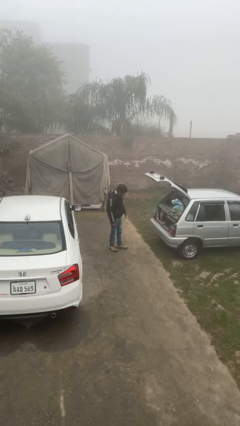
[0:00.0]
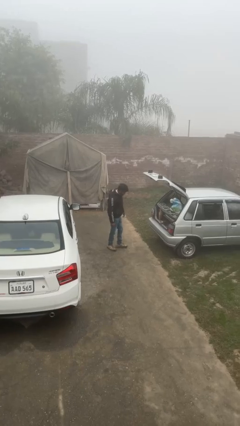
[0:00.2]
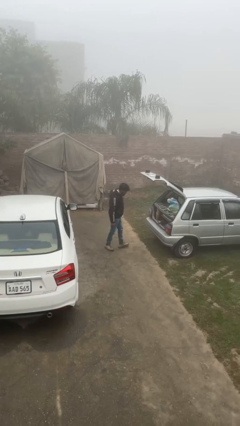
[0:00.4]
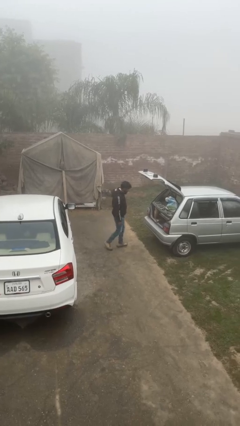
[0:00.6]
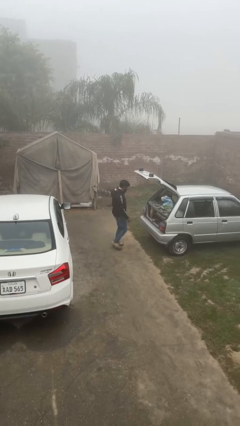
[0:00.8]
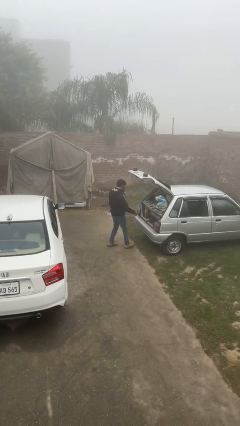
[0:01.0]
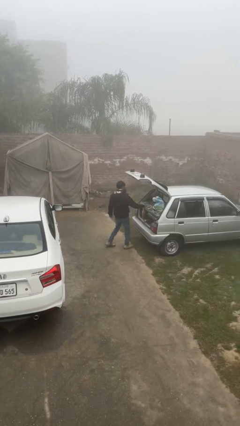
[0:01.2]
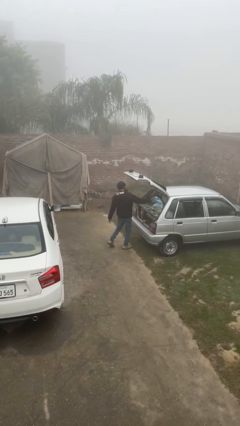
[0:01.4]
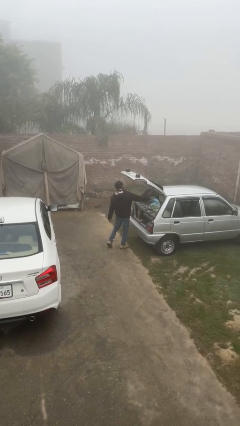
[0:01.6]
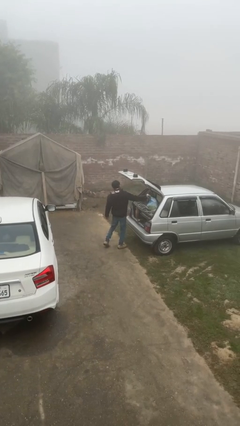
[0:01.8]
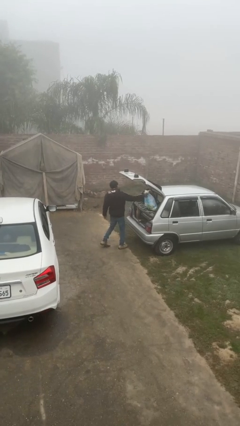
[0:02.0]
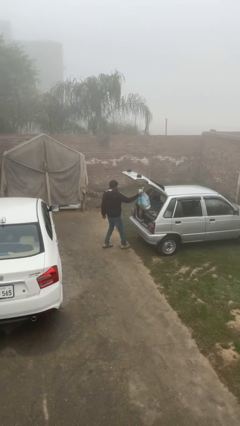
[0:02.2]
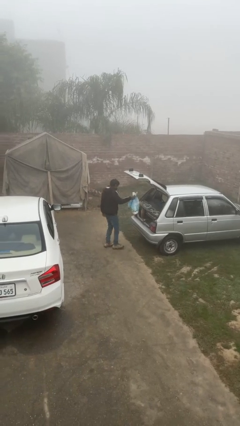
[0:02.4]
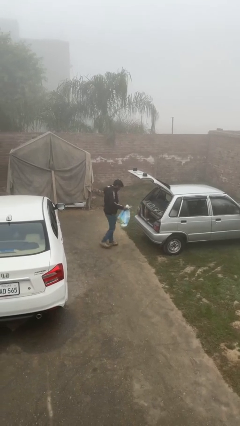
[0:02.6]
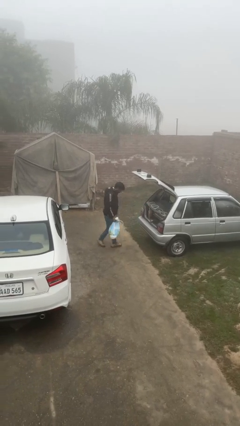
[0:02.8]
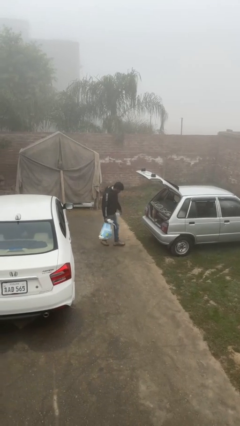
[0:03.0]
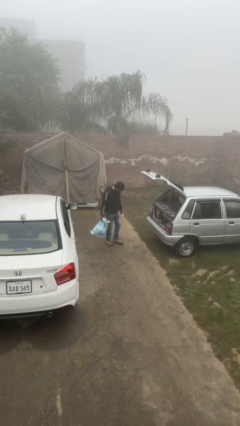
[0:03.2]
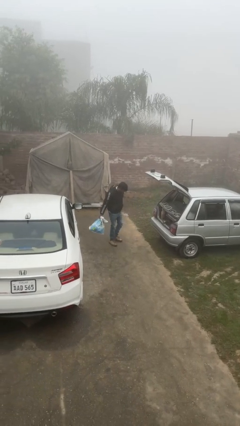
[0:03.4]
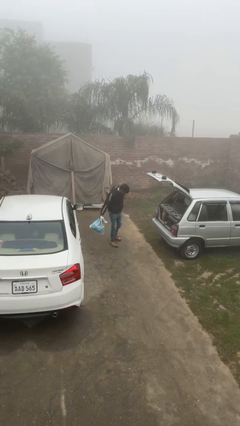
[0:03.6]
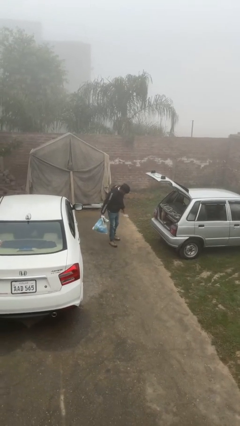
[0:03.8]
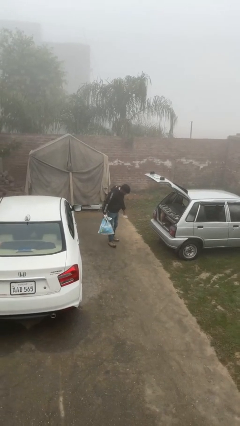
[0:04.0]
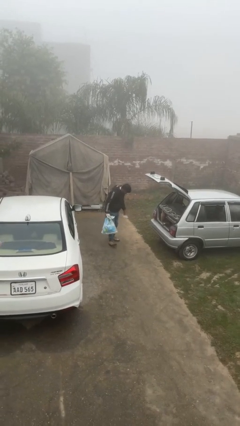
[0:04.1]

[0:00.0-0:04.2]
person unloads car

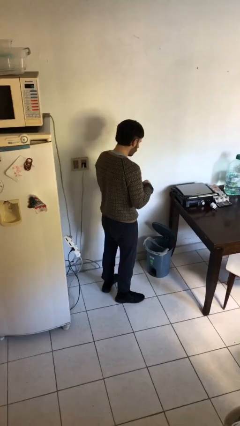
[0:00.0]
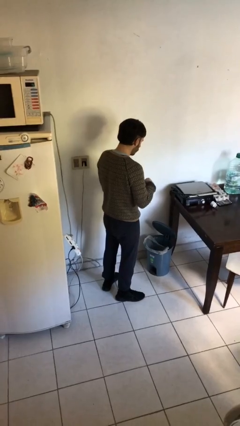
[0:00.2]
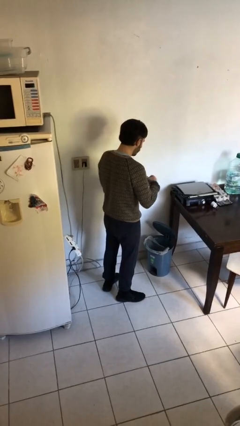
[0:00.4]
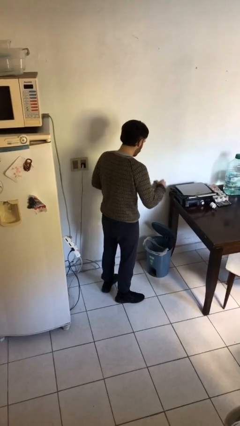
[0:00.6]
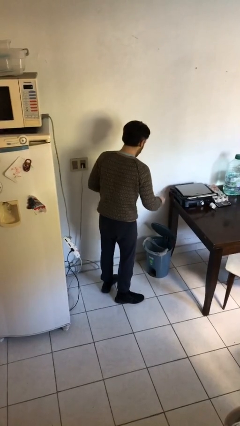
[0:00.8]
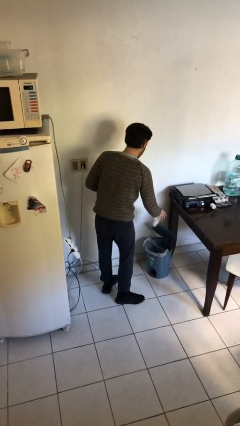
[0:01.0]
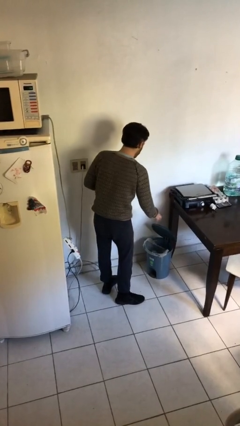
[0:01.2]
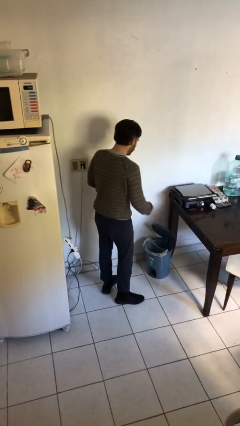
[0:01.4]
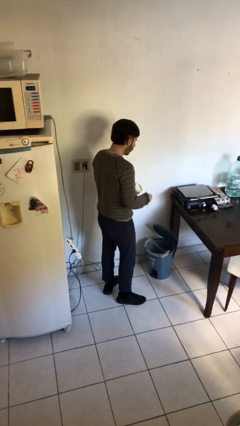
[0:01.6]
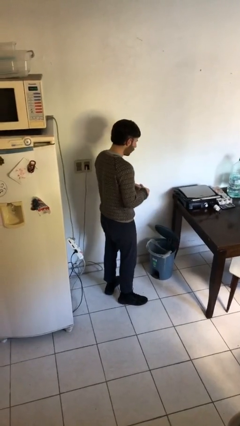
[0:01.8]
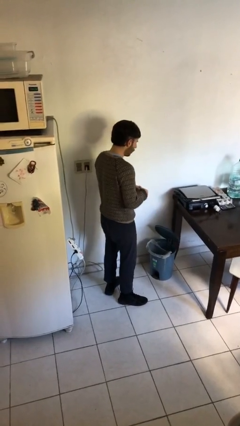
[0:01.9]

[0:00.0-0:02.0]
person discards trash

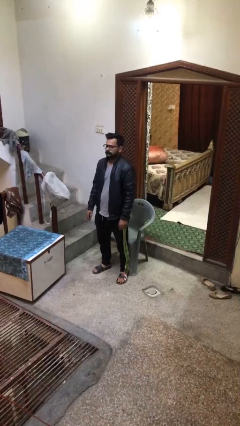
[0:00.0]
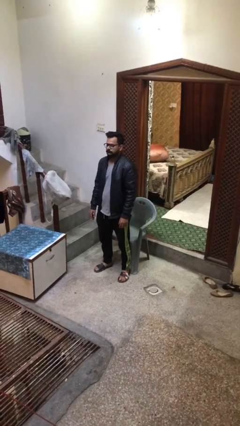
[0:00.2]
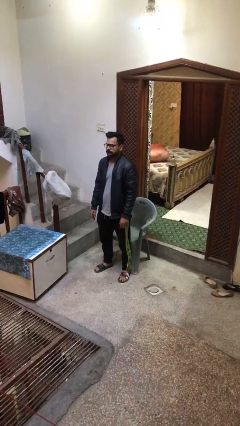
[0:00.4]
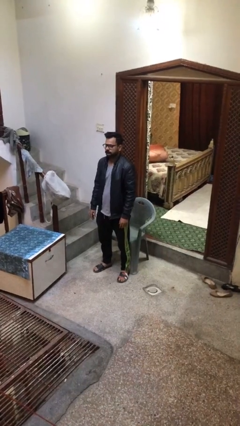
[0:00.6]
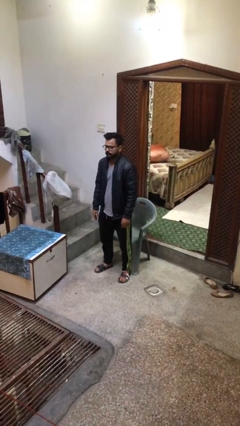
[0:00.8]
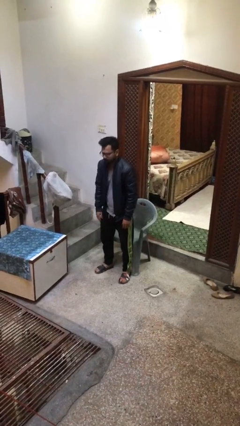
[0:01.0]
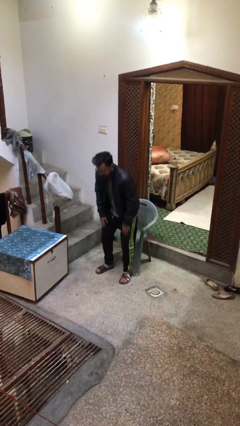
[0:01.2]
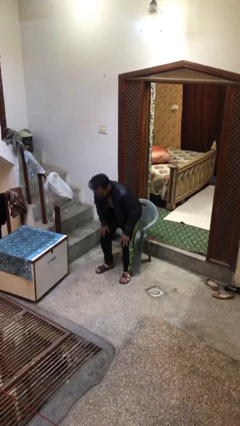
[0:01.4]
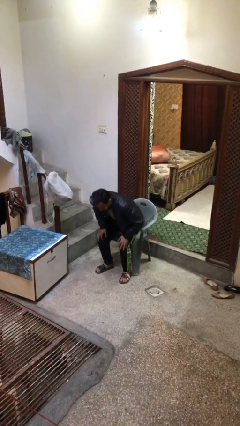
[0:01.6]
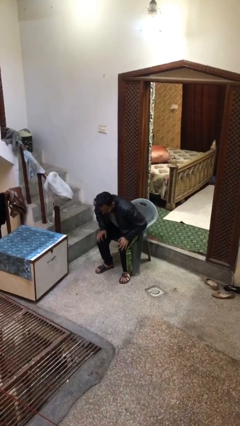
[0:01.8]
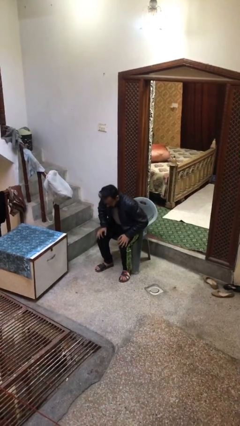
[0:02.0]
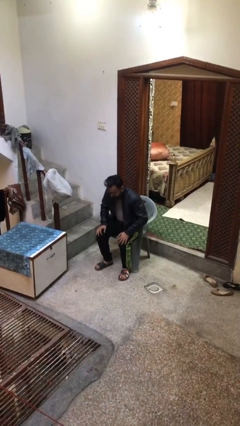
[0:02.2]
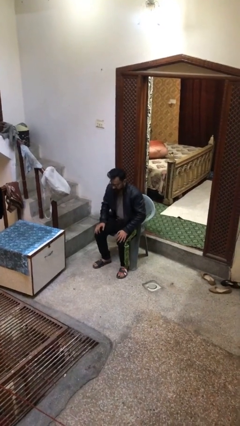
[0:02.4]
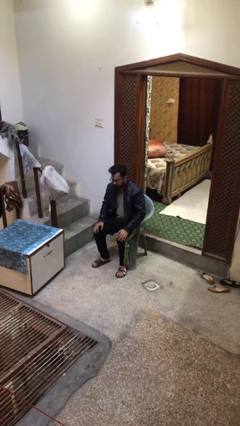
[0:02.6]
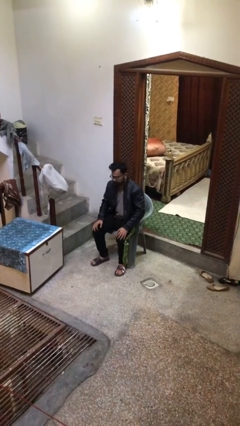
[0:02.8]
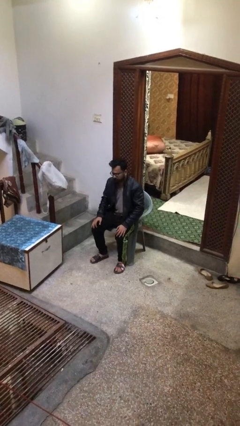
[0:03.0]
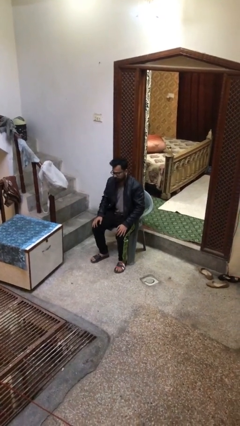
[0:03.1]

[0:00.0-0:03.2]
person sits down

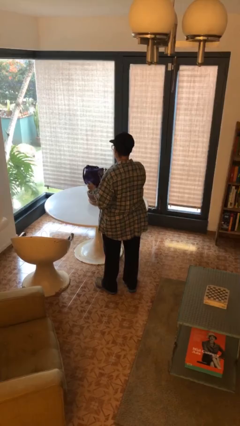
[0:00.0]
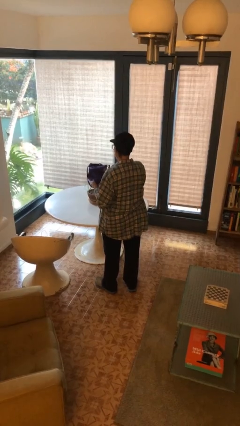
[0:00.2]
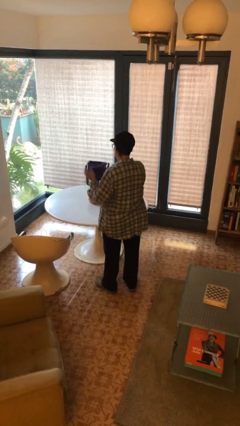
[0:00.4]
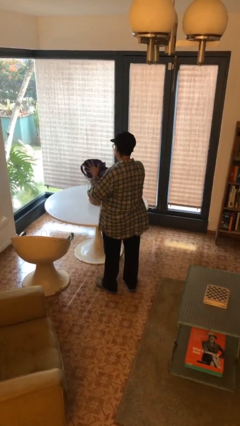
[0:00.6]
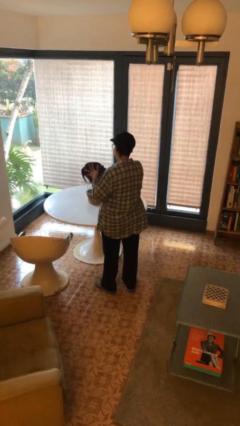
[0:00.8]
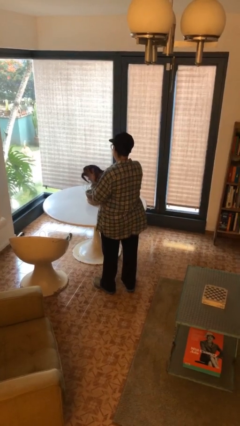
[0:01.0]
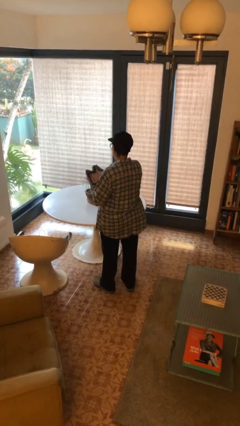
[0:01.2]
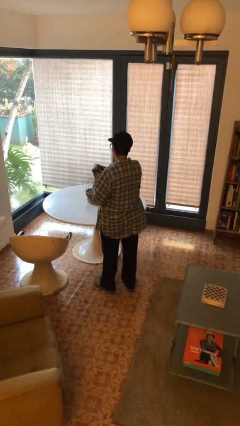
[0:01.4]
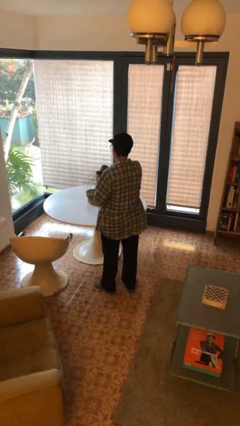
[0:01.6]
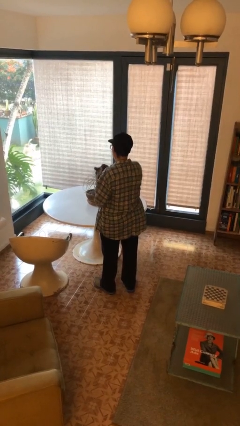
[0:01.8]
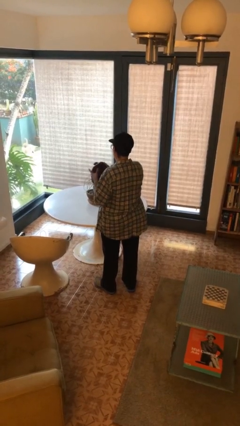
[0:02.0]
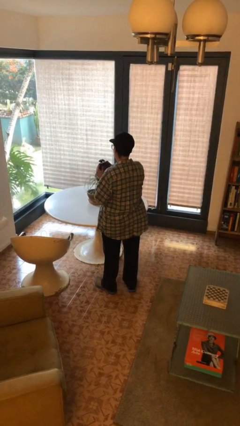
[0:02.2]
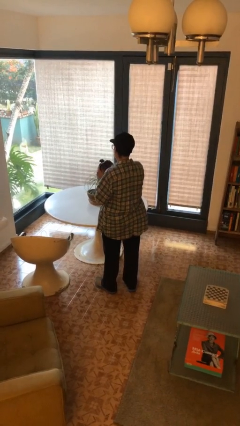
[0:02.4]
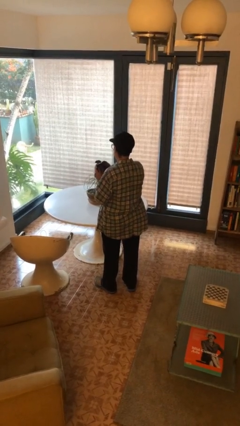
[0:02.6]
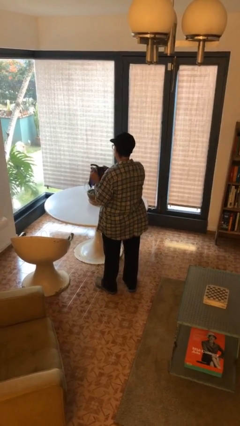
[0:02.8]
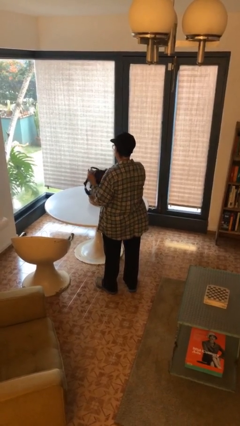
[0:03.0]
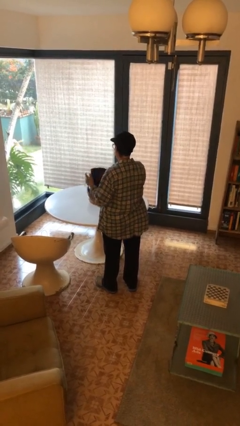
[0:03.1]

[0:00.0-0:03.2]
person squeezes object

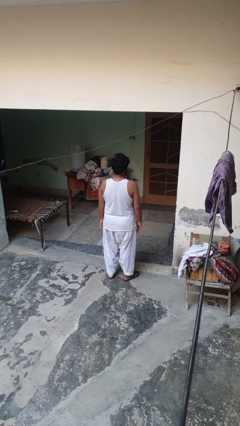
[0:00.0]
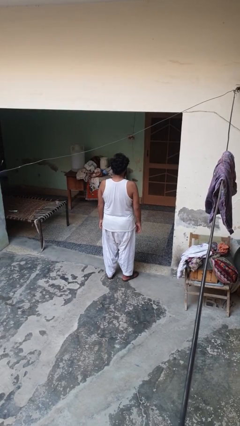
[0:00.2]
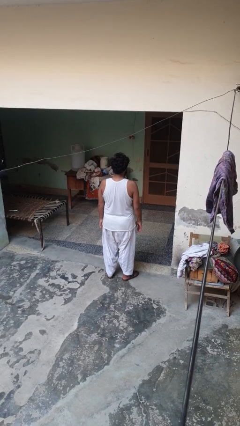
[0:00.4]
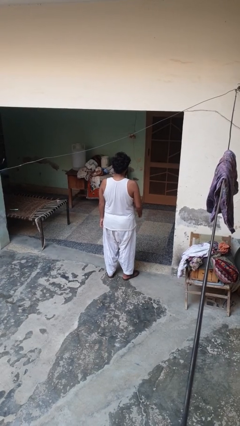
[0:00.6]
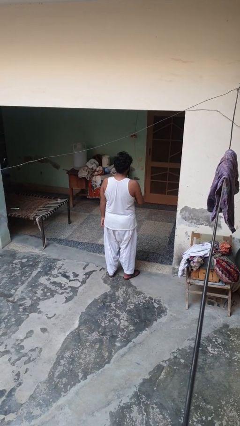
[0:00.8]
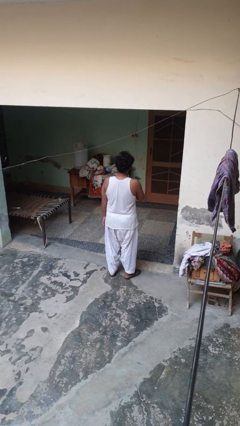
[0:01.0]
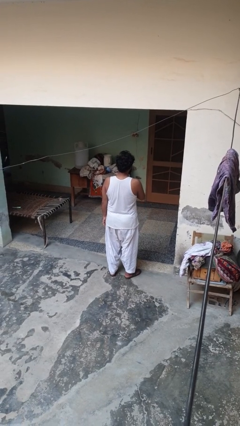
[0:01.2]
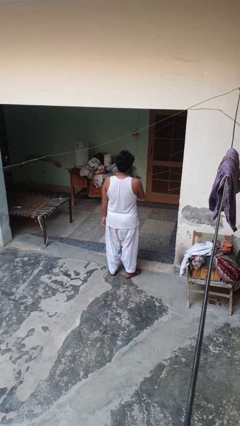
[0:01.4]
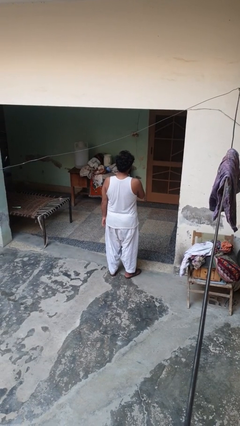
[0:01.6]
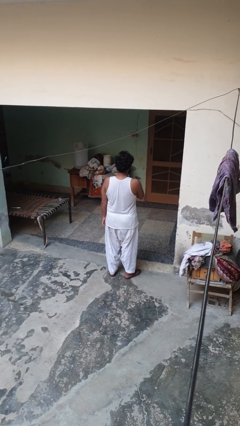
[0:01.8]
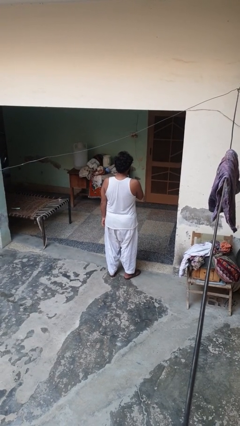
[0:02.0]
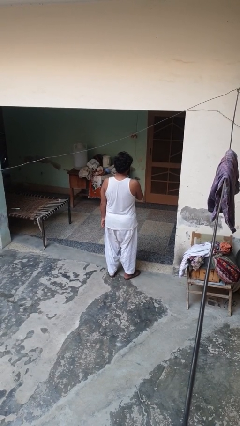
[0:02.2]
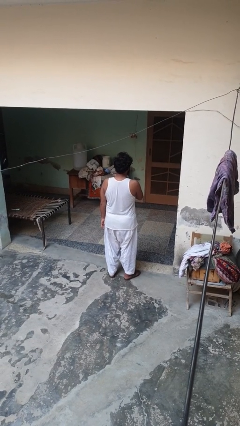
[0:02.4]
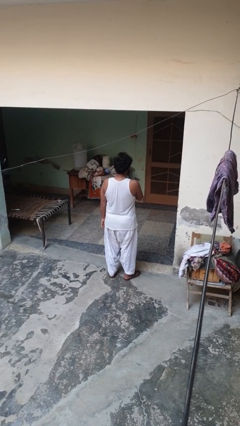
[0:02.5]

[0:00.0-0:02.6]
person drums on chest

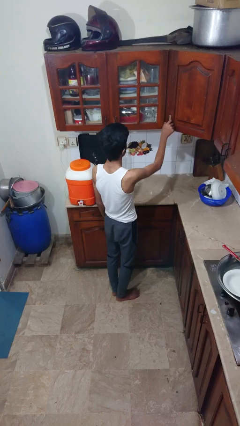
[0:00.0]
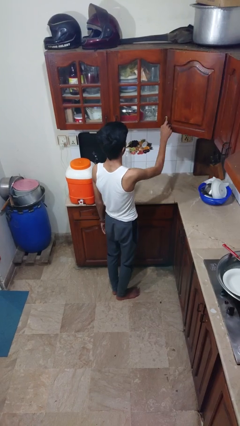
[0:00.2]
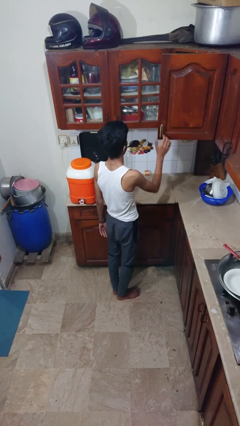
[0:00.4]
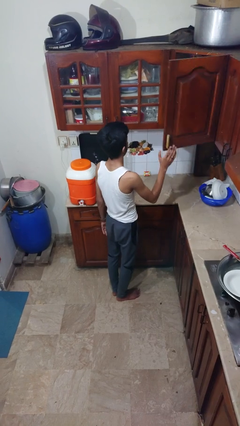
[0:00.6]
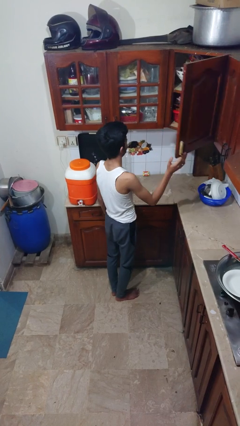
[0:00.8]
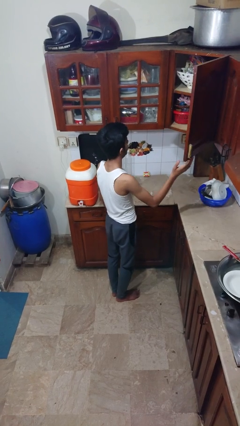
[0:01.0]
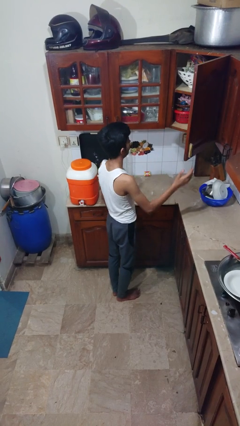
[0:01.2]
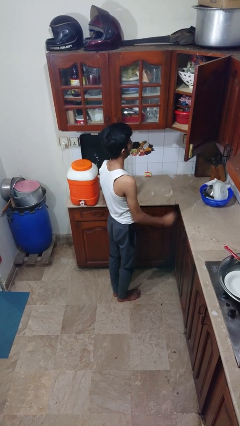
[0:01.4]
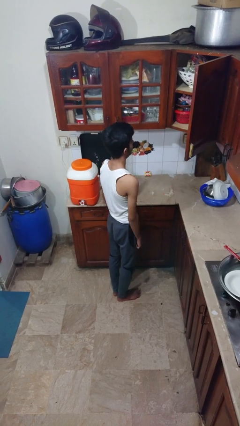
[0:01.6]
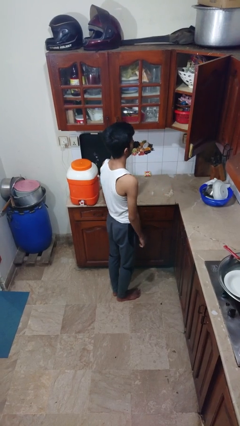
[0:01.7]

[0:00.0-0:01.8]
person closes cabinet

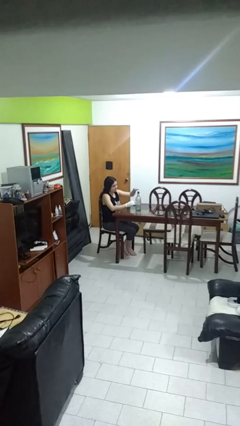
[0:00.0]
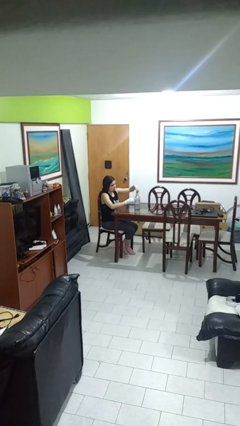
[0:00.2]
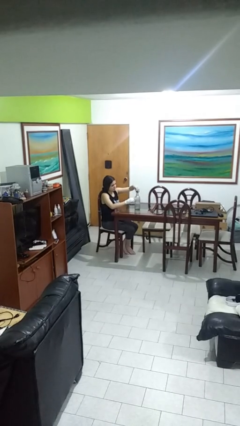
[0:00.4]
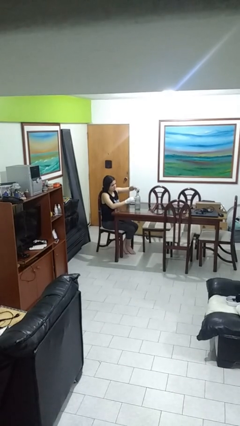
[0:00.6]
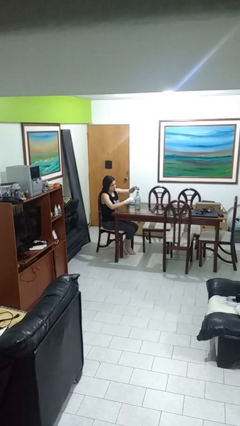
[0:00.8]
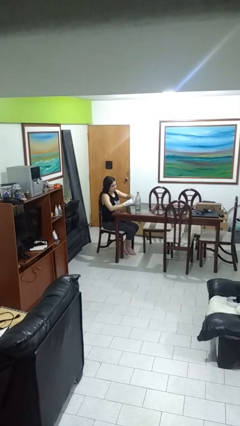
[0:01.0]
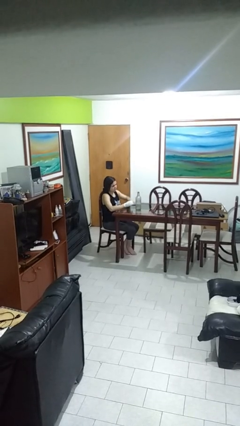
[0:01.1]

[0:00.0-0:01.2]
person unscrews lid from bottle
